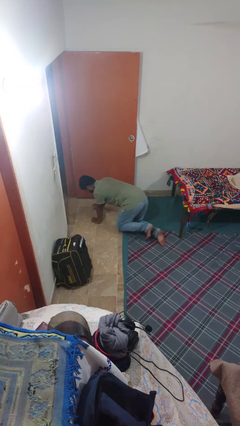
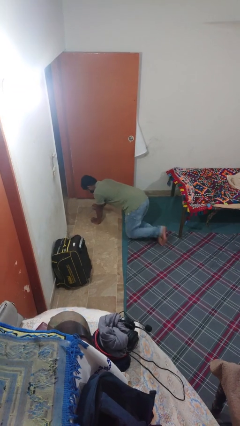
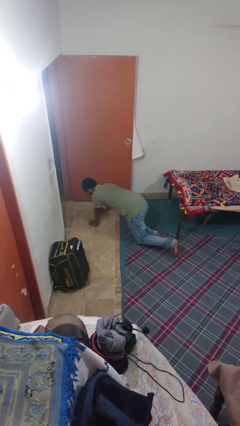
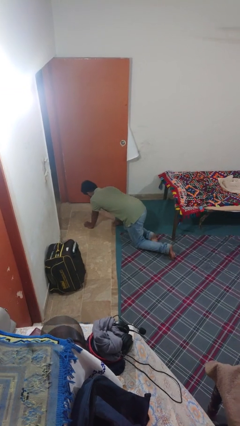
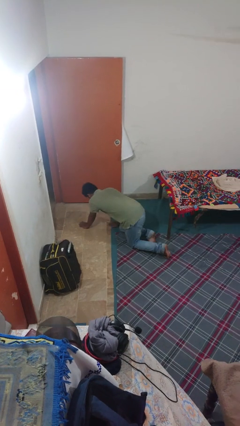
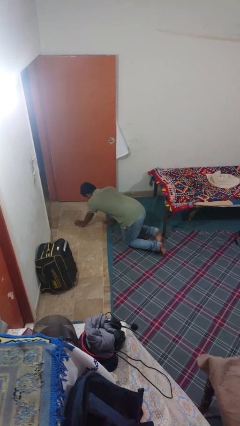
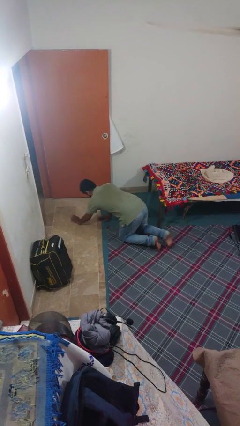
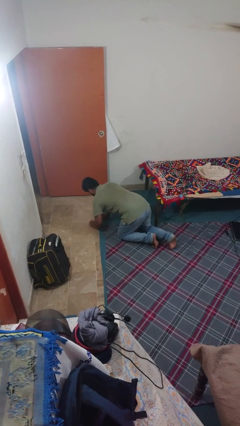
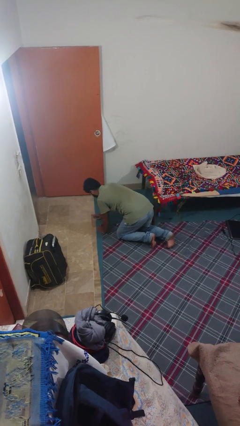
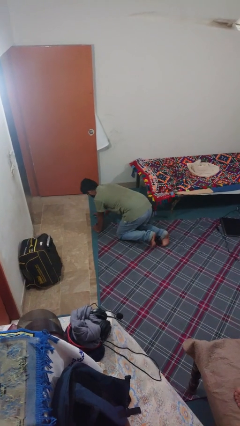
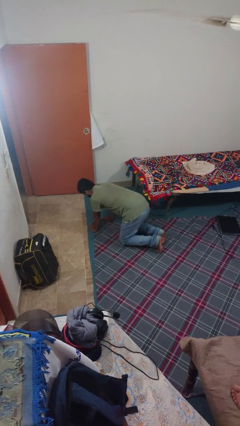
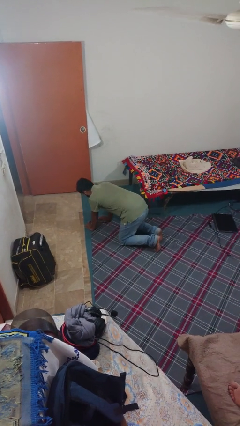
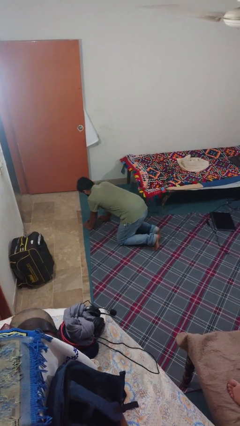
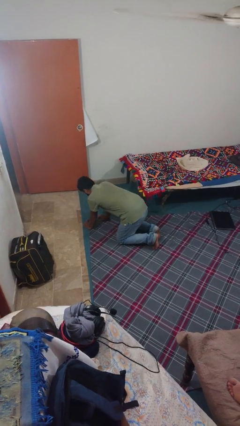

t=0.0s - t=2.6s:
person crawls

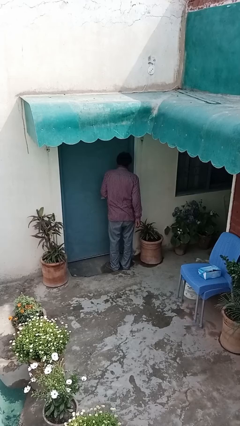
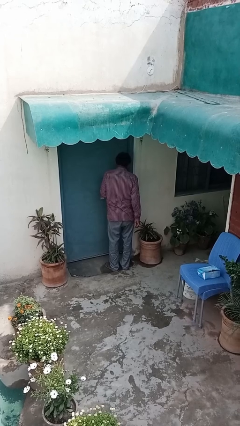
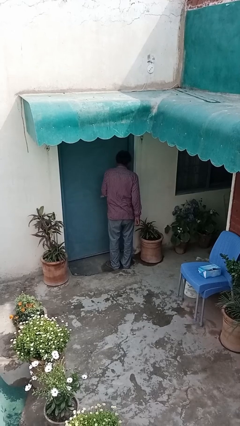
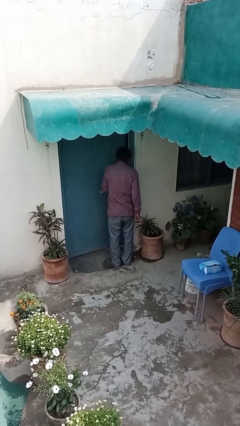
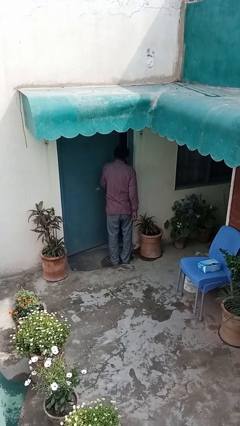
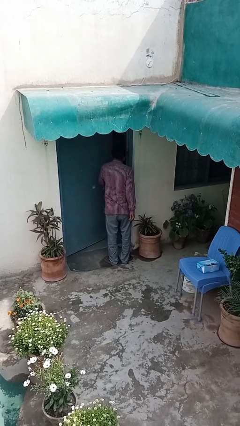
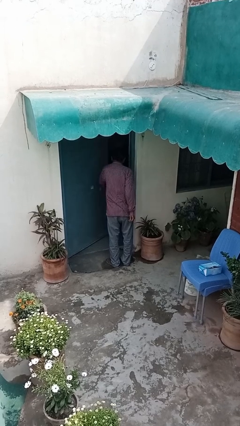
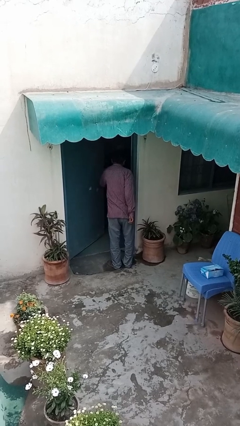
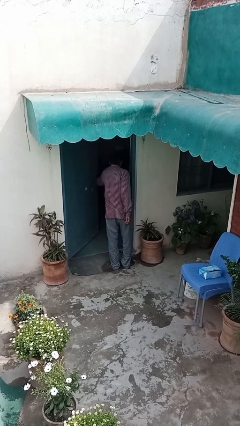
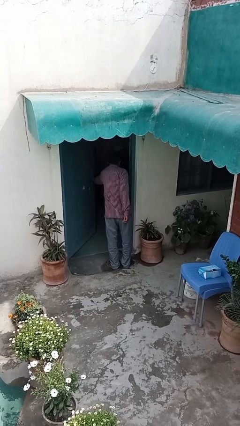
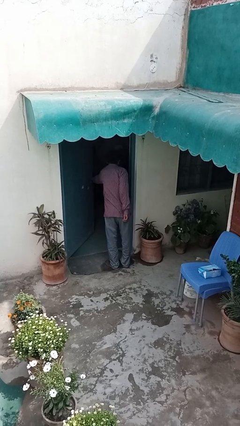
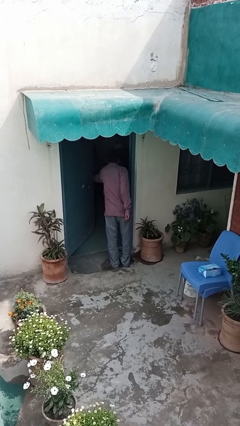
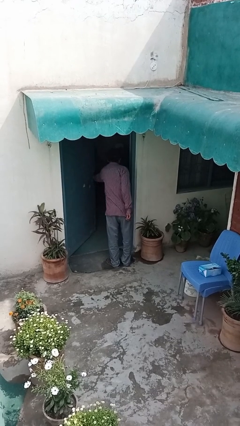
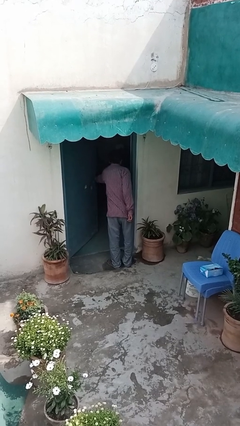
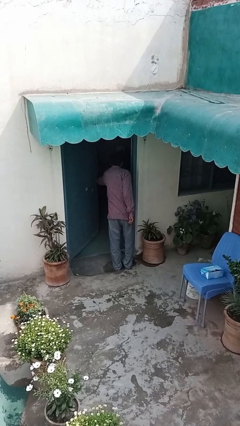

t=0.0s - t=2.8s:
person opens facility door

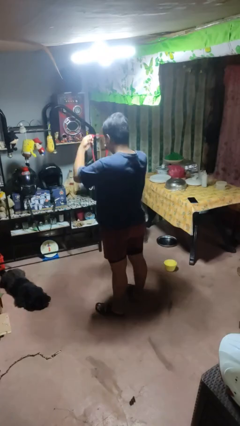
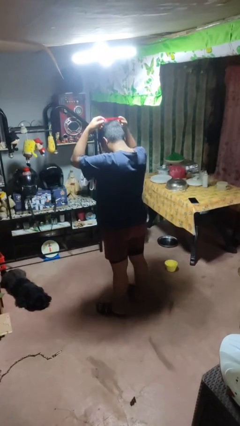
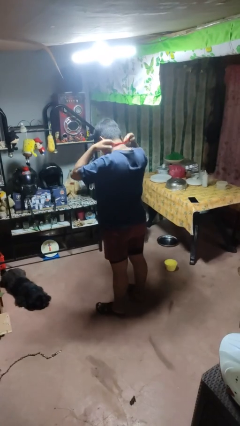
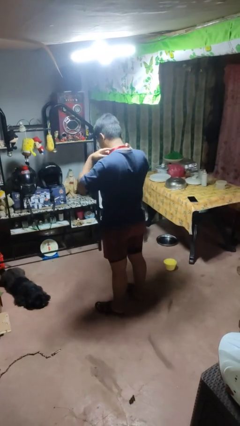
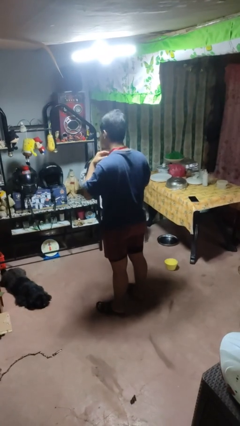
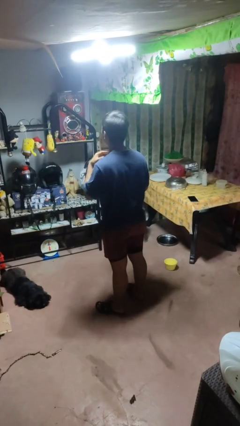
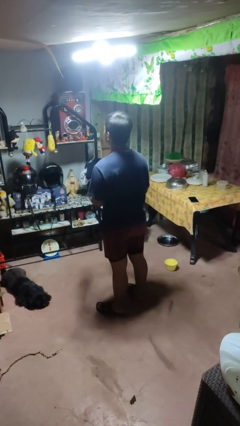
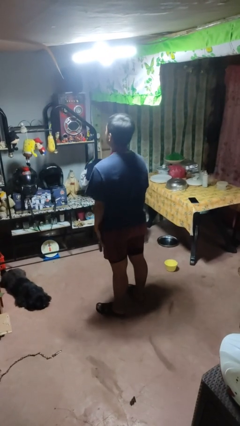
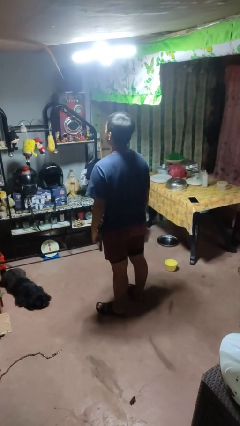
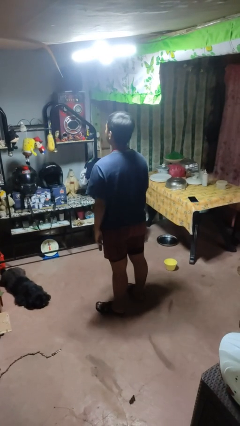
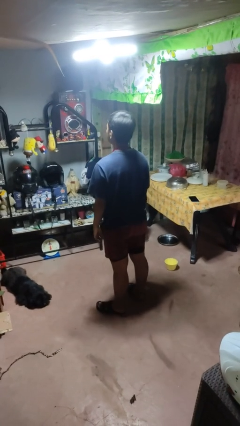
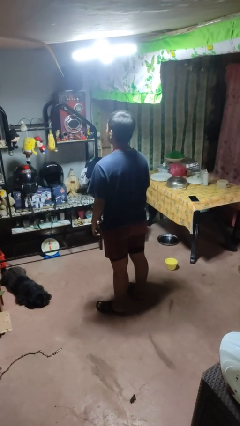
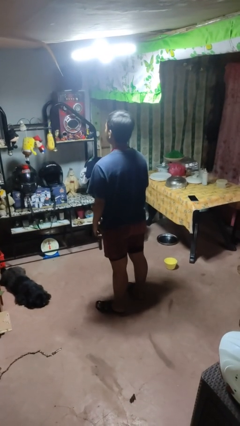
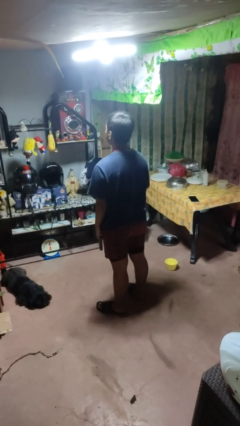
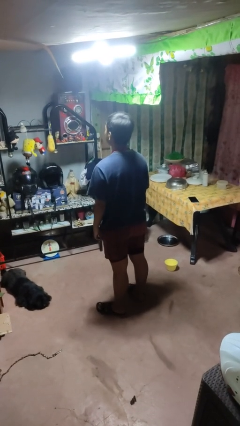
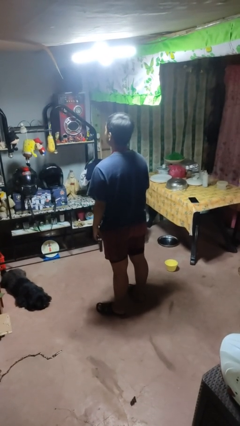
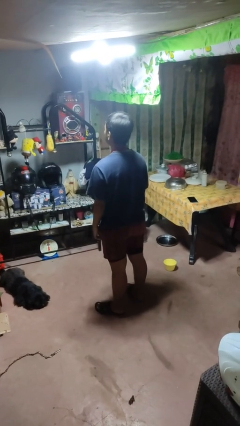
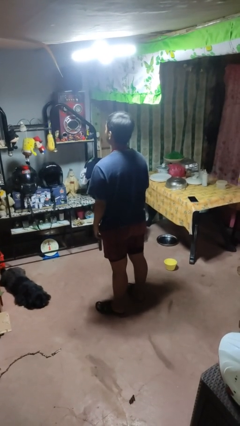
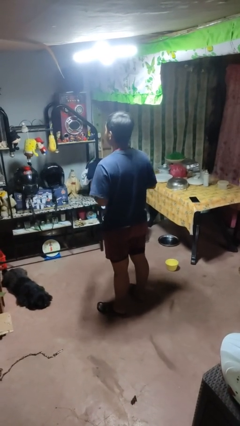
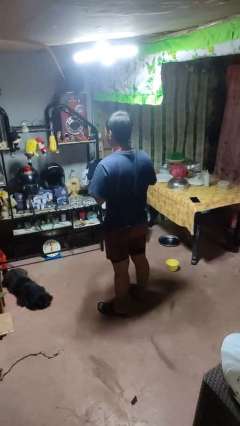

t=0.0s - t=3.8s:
person puts on necklace

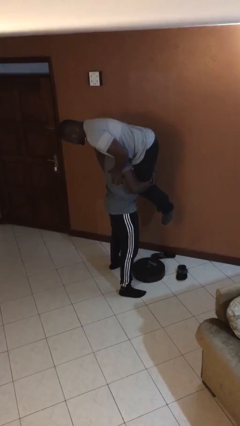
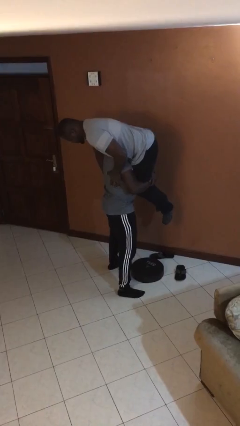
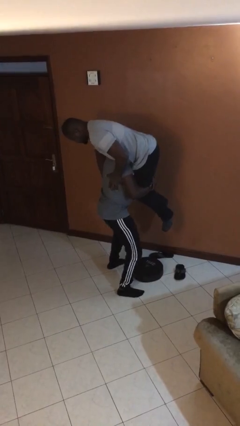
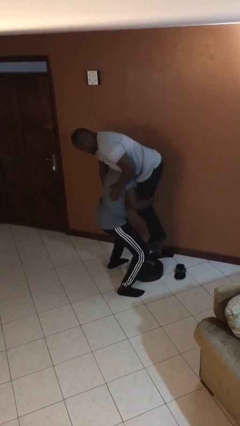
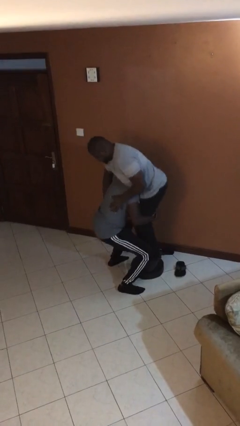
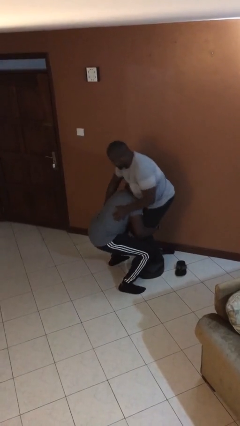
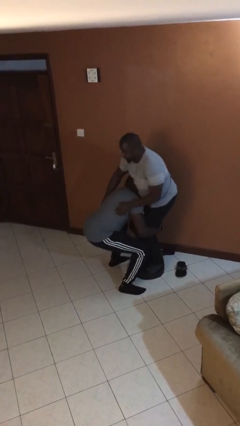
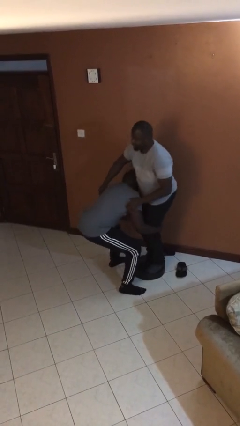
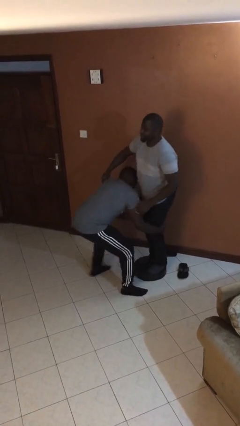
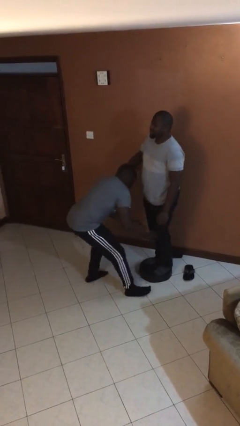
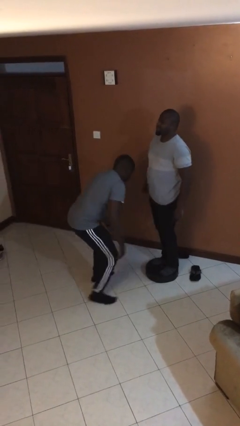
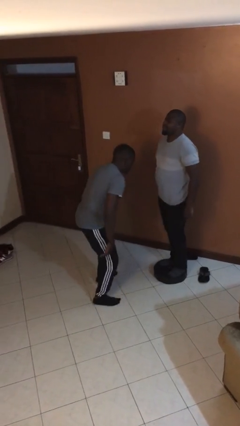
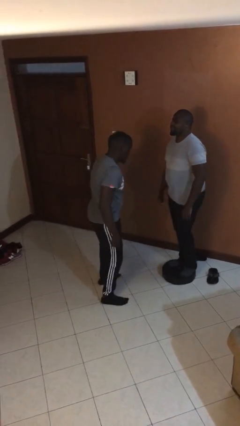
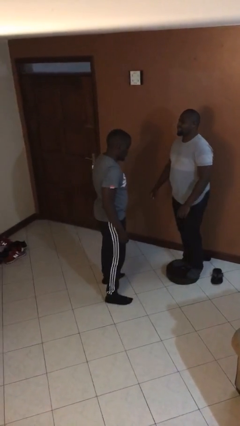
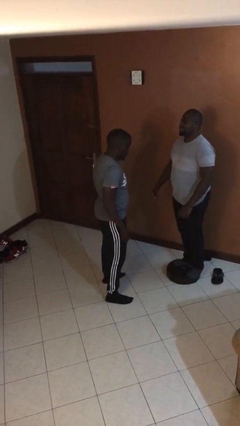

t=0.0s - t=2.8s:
person puts down person

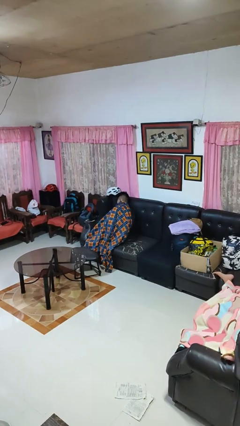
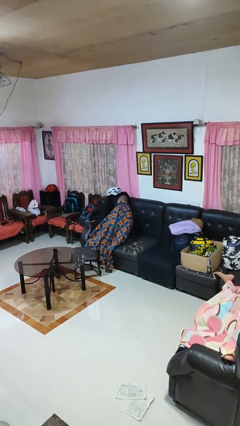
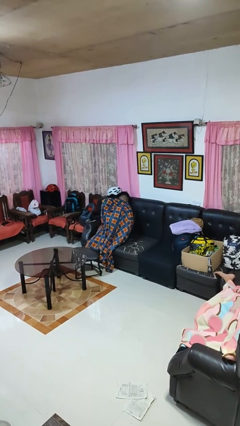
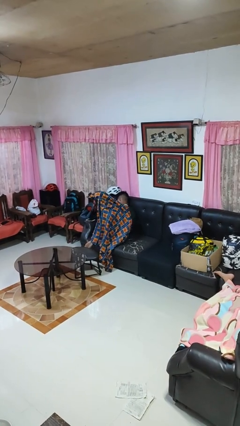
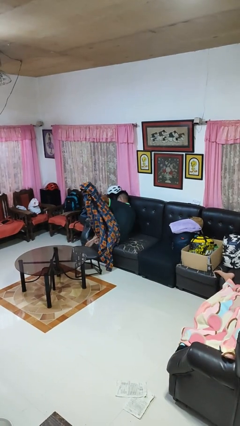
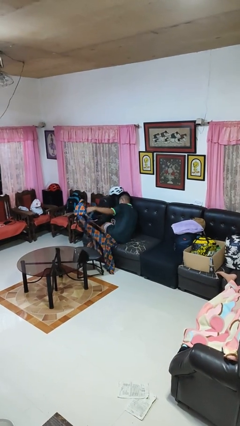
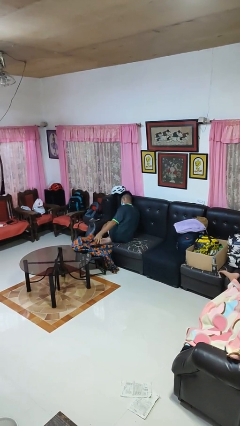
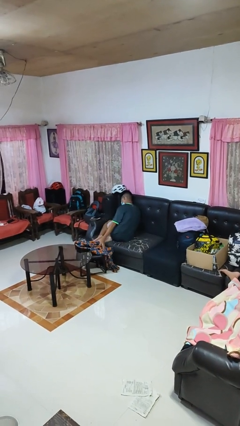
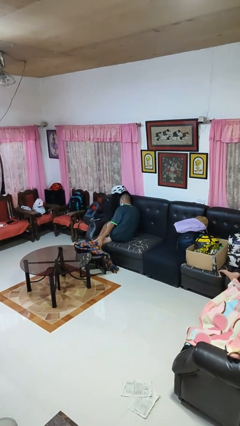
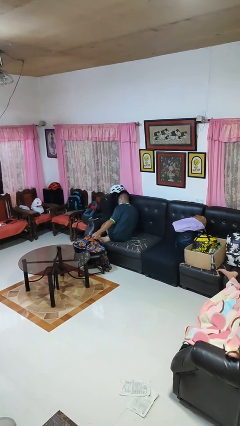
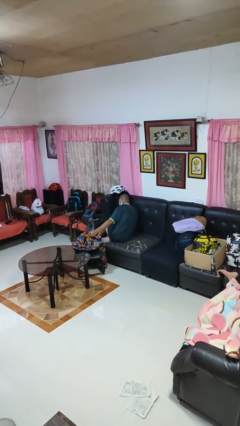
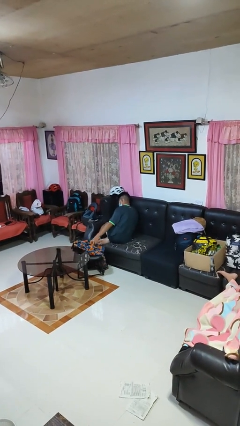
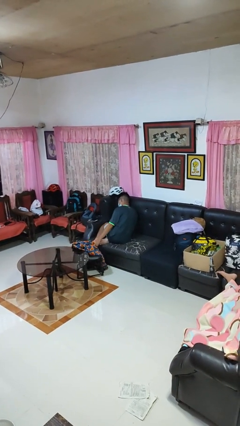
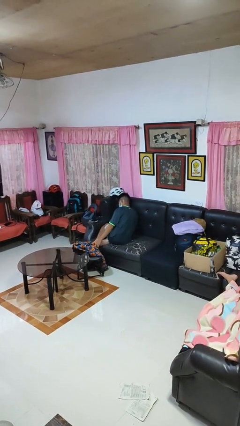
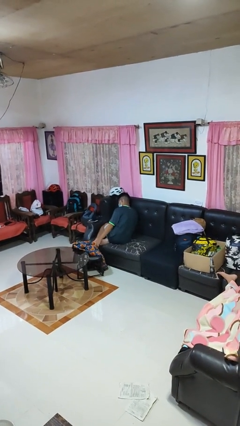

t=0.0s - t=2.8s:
person uncovers with blanket

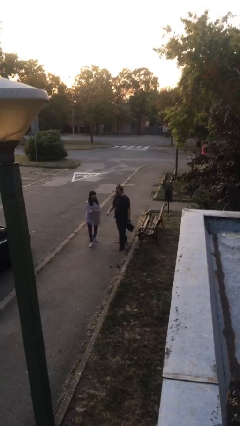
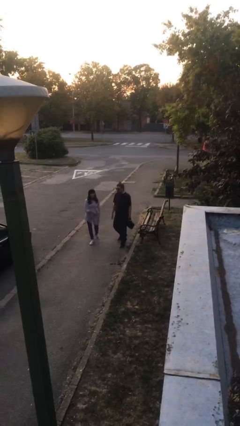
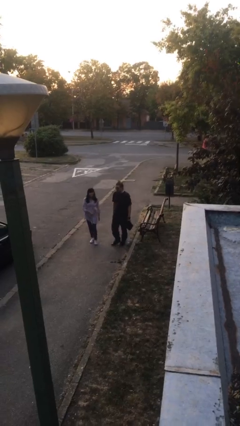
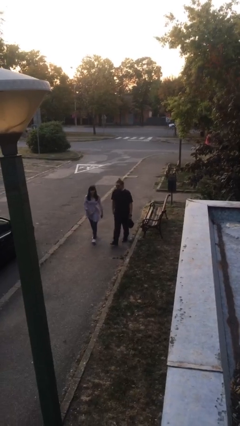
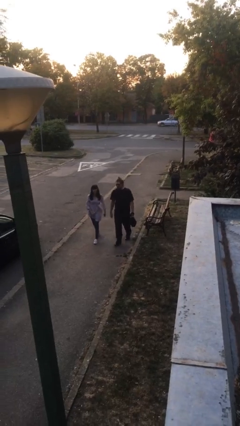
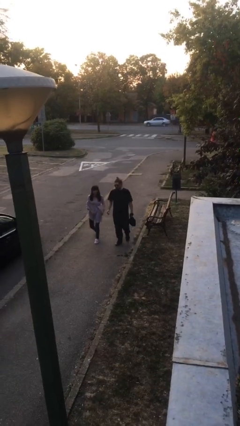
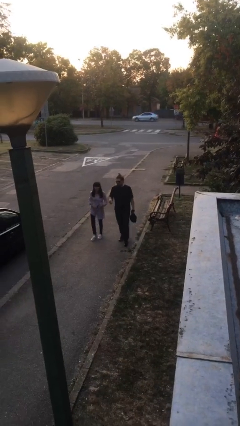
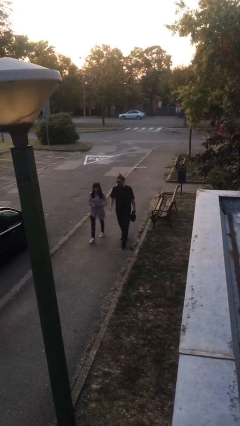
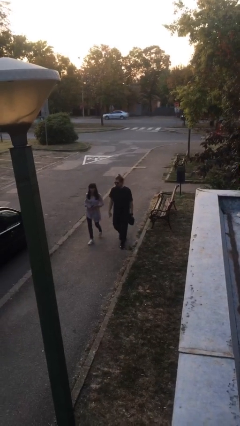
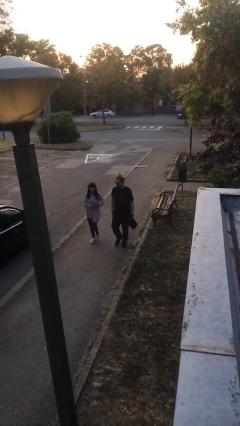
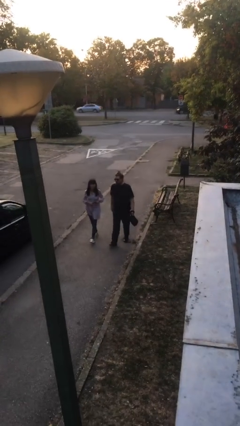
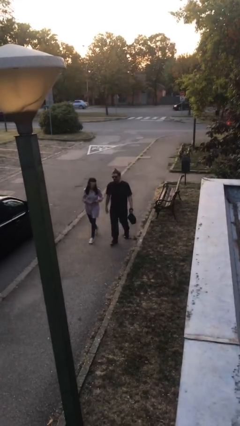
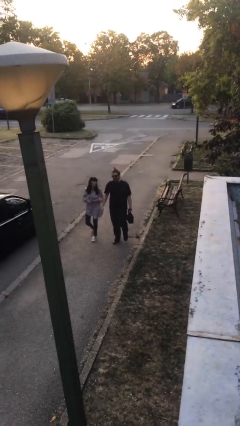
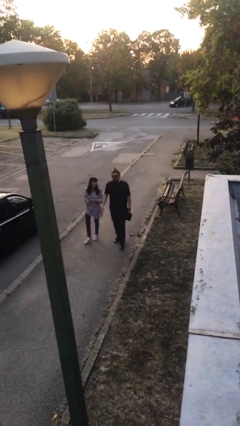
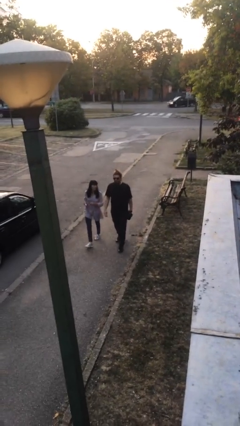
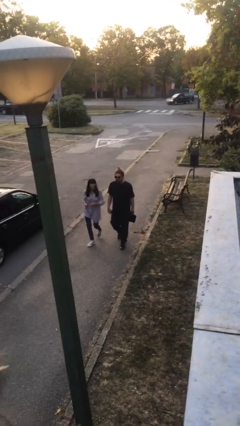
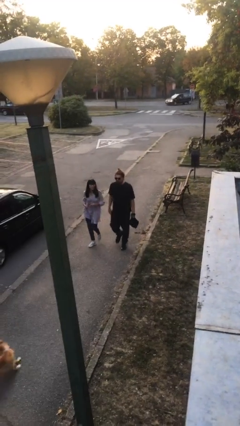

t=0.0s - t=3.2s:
person talks to person
